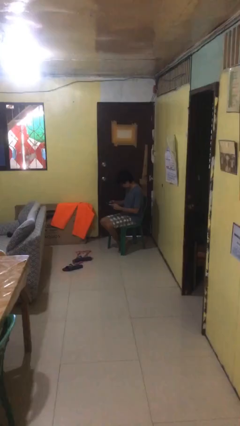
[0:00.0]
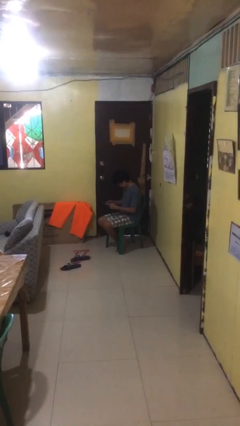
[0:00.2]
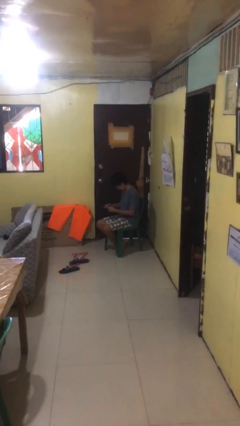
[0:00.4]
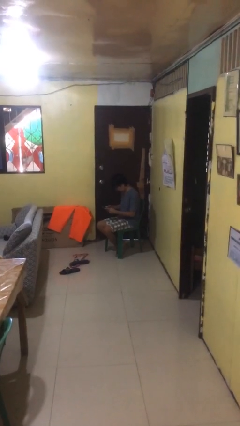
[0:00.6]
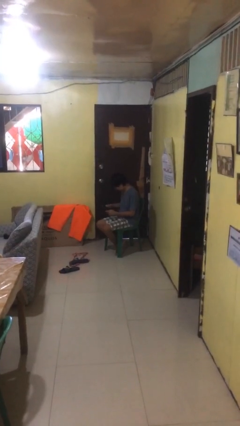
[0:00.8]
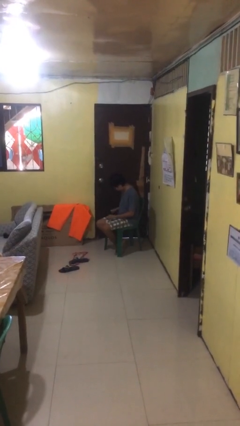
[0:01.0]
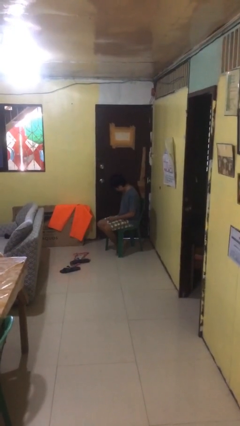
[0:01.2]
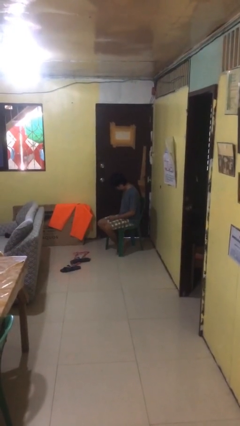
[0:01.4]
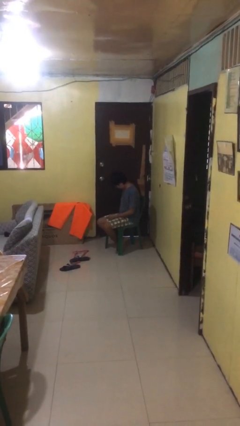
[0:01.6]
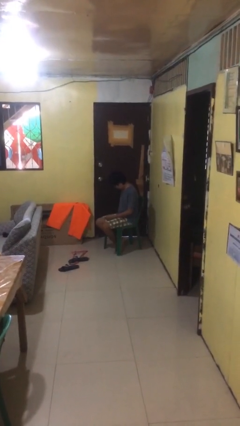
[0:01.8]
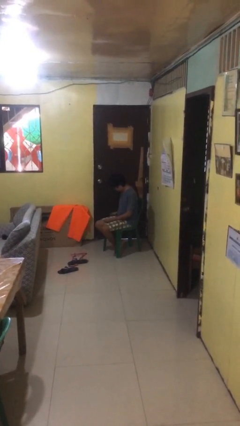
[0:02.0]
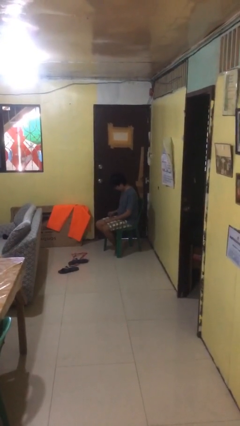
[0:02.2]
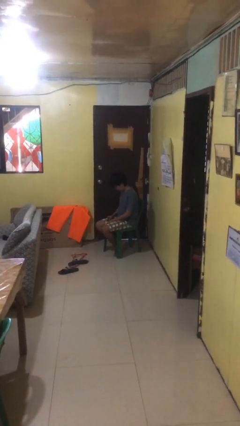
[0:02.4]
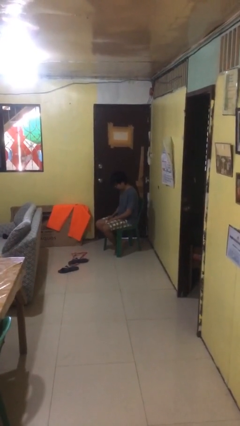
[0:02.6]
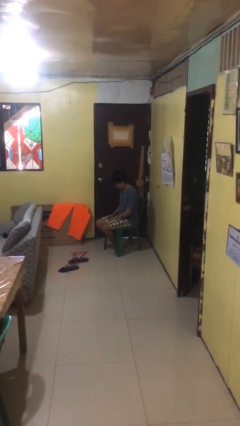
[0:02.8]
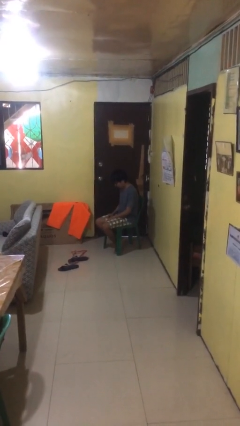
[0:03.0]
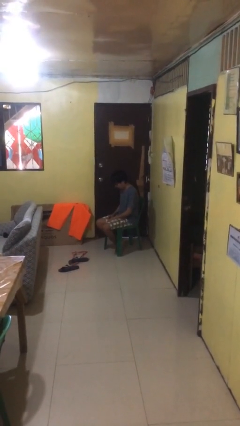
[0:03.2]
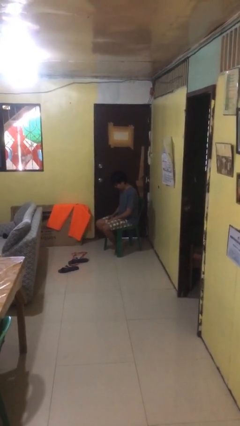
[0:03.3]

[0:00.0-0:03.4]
person puts phone into pocket

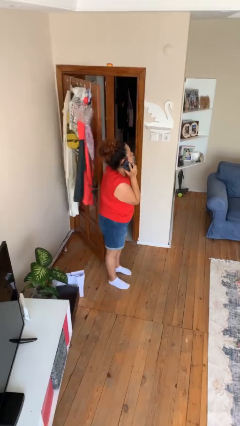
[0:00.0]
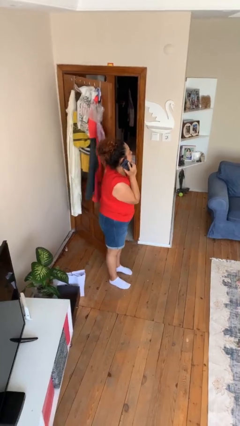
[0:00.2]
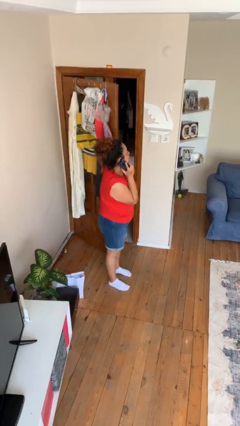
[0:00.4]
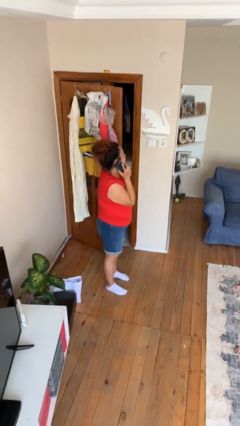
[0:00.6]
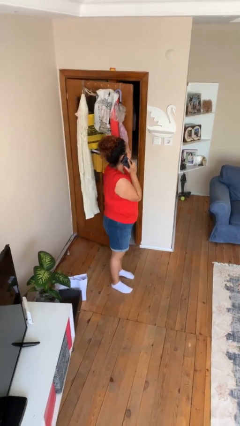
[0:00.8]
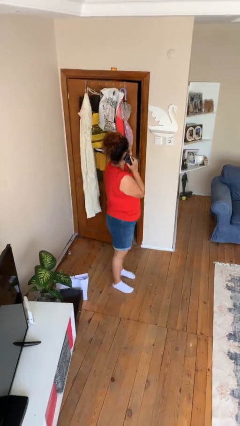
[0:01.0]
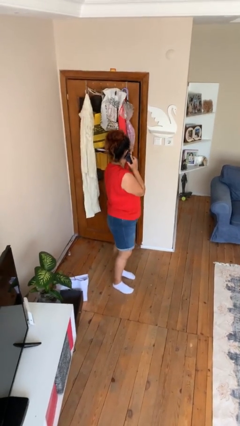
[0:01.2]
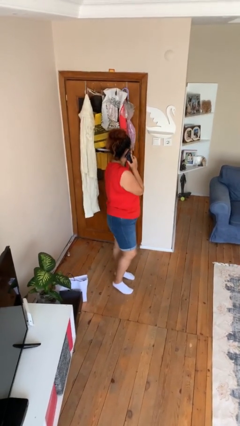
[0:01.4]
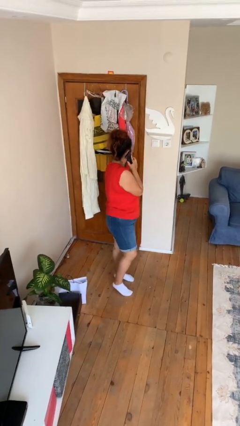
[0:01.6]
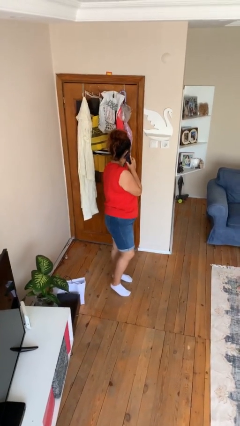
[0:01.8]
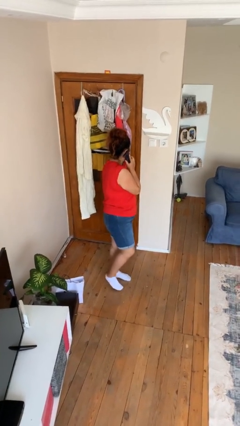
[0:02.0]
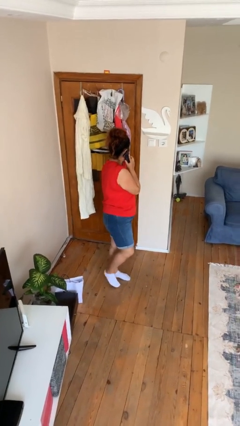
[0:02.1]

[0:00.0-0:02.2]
person closes facility door

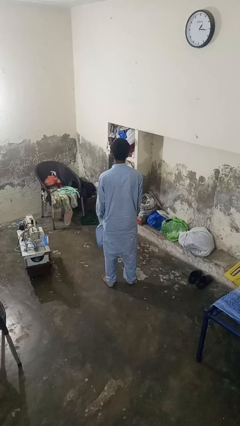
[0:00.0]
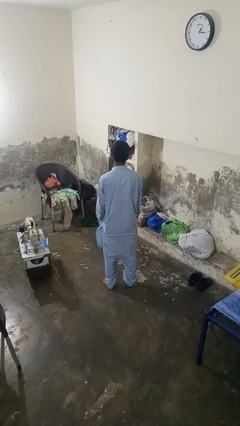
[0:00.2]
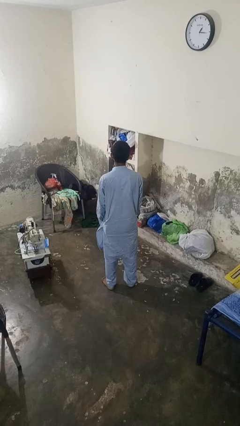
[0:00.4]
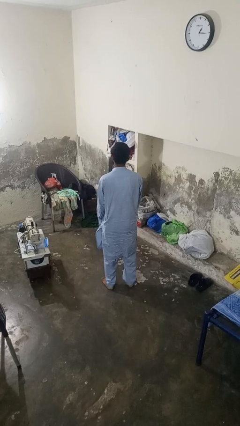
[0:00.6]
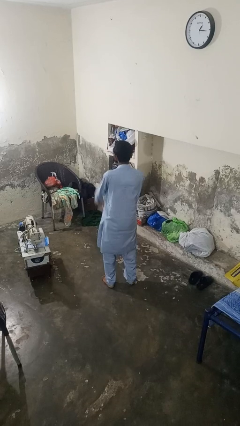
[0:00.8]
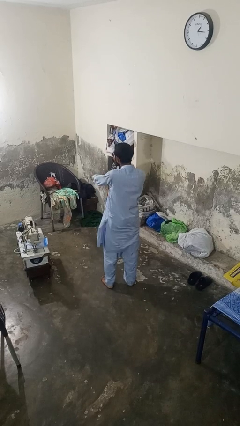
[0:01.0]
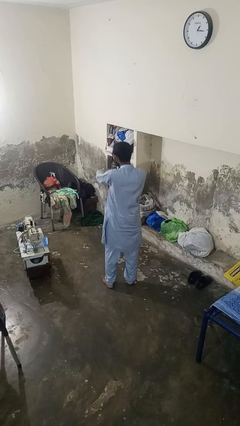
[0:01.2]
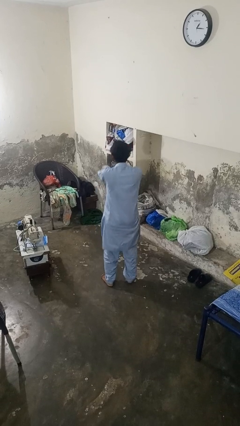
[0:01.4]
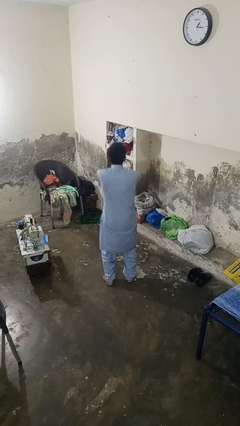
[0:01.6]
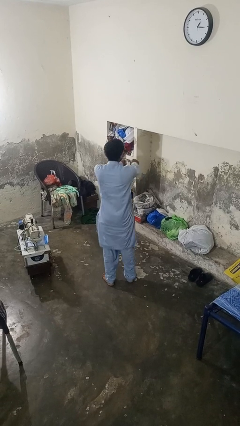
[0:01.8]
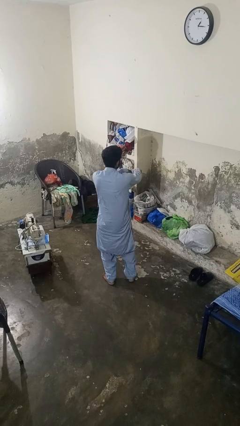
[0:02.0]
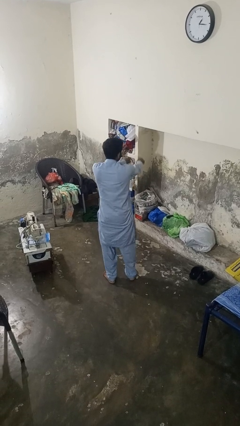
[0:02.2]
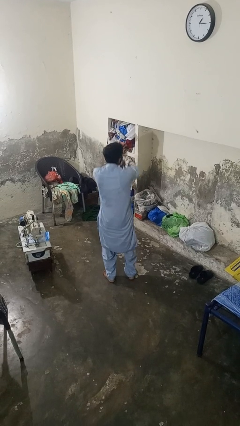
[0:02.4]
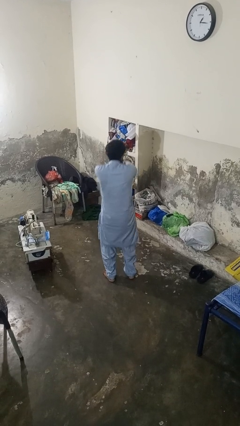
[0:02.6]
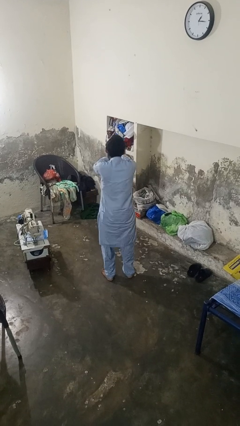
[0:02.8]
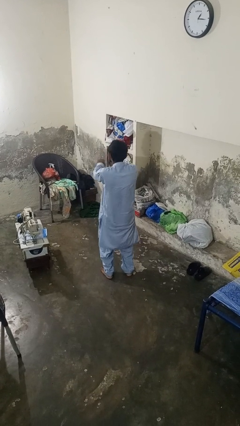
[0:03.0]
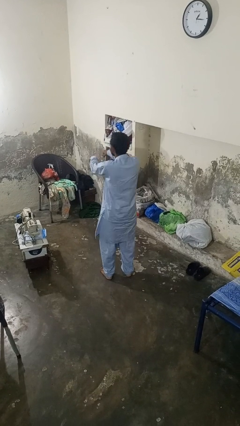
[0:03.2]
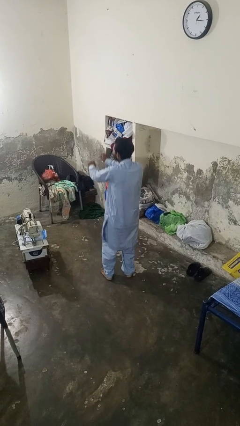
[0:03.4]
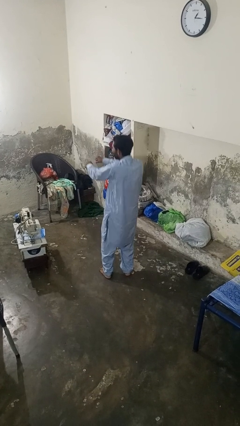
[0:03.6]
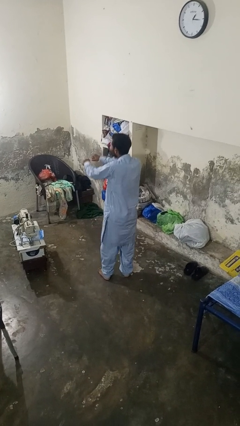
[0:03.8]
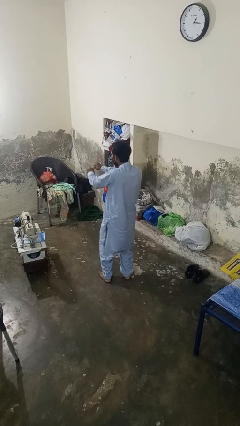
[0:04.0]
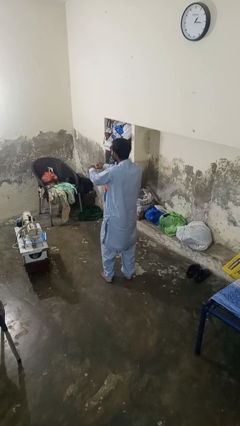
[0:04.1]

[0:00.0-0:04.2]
person dances in place

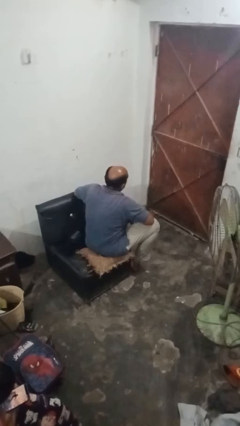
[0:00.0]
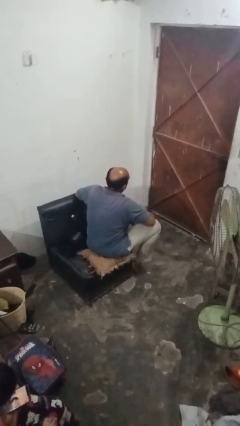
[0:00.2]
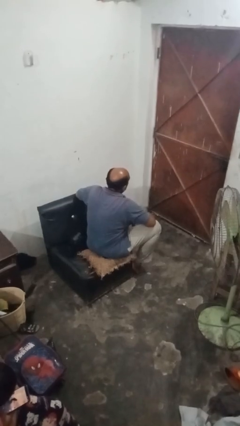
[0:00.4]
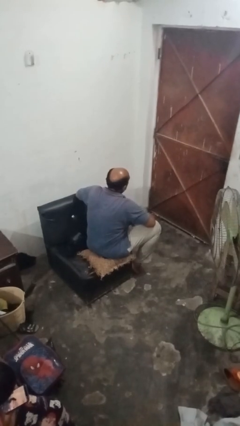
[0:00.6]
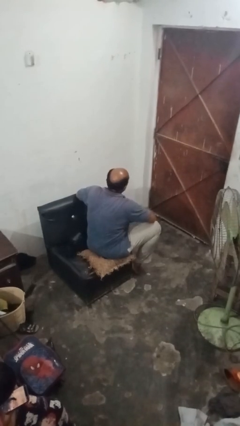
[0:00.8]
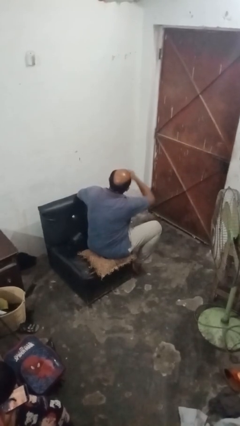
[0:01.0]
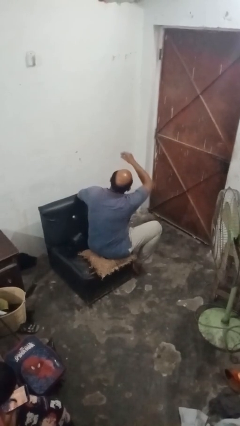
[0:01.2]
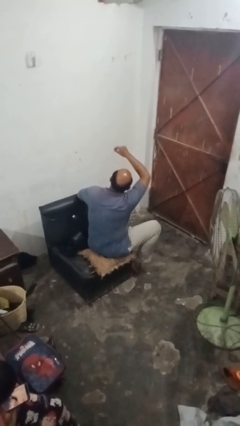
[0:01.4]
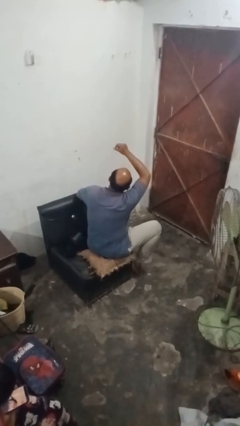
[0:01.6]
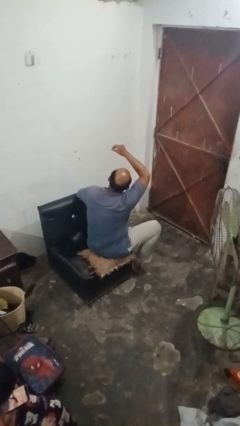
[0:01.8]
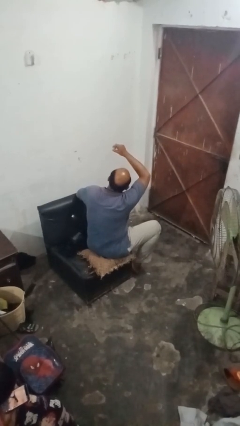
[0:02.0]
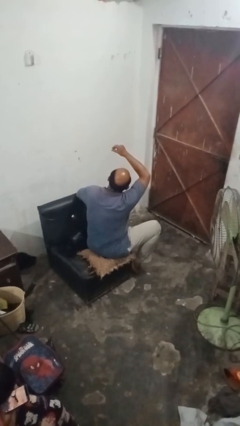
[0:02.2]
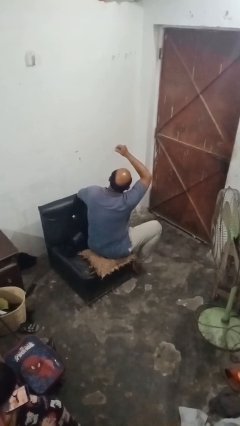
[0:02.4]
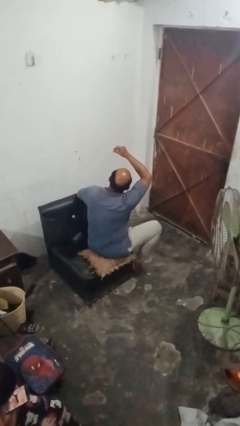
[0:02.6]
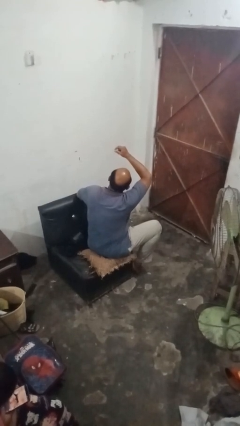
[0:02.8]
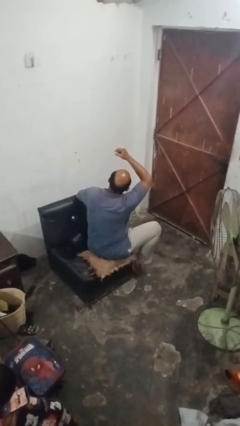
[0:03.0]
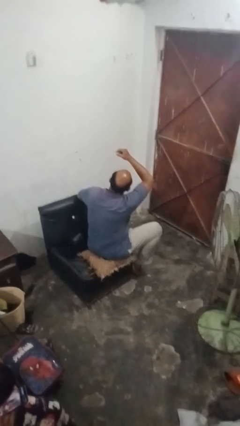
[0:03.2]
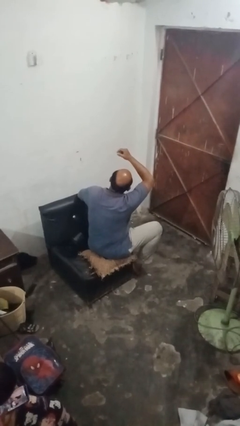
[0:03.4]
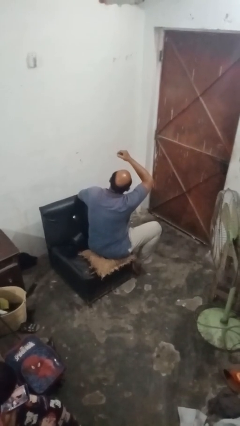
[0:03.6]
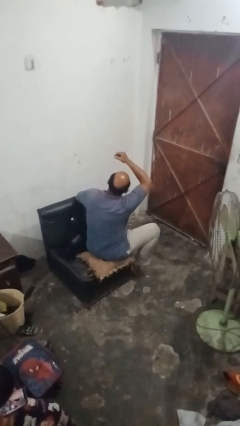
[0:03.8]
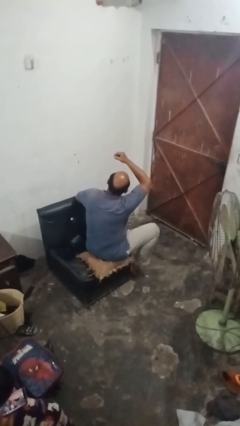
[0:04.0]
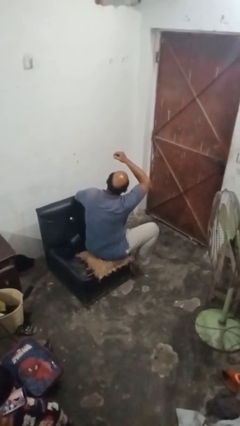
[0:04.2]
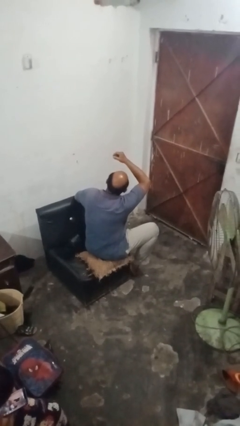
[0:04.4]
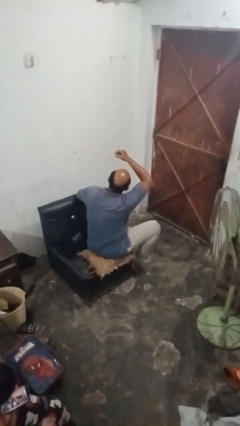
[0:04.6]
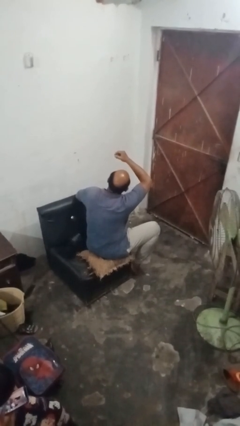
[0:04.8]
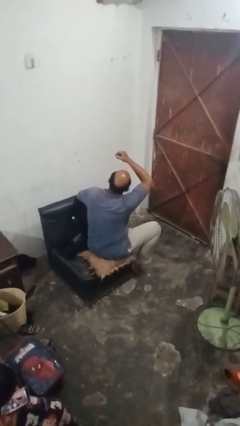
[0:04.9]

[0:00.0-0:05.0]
person snaps fingers

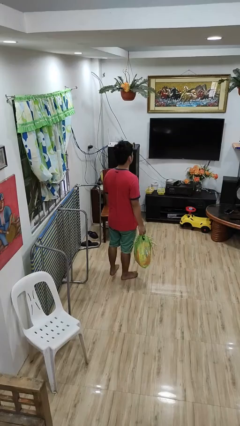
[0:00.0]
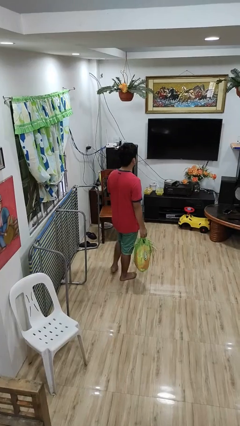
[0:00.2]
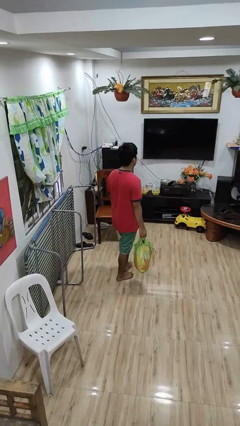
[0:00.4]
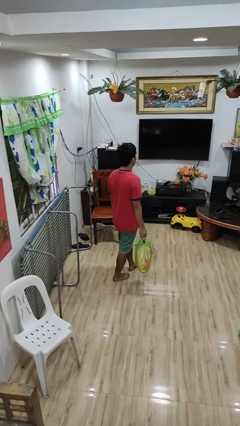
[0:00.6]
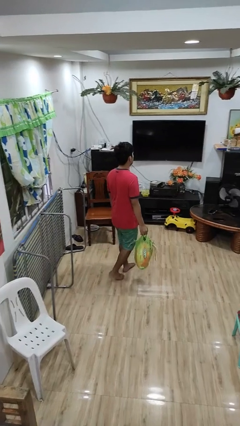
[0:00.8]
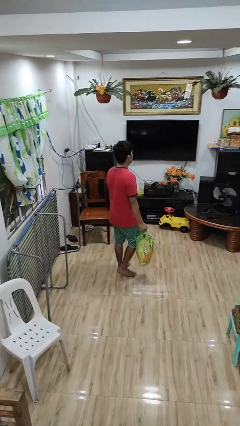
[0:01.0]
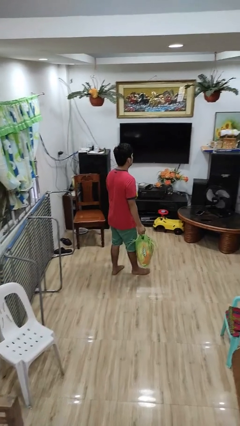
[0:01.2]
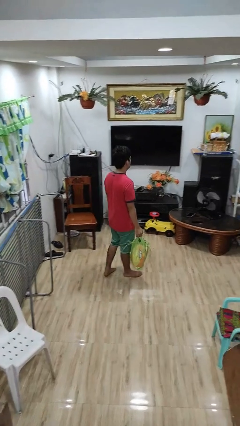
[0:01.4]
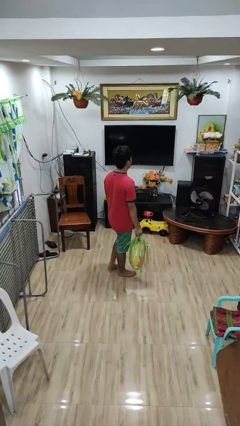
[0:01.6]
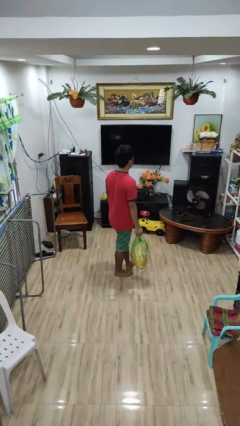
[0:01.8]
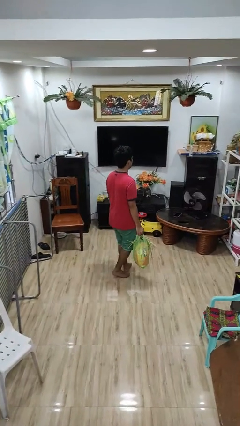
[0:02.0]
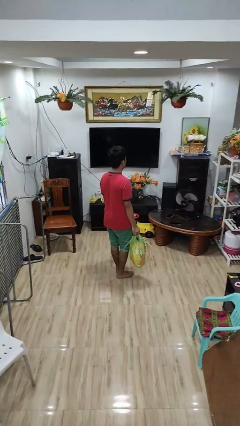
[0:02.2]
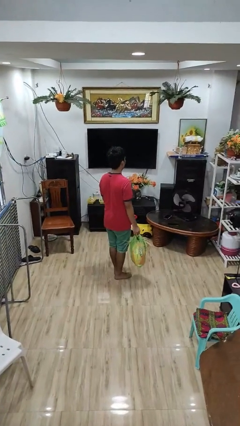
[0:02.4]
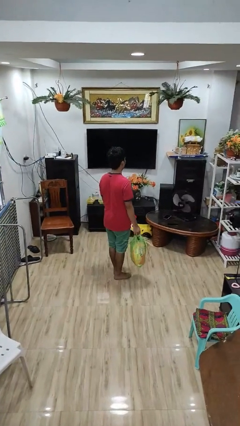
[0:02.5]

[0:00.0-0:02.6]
person carries groceries

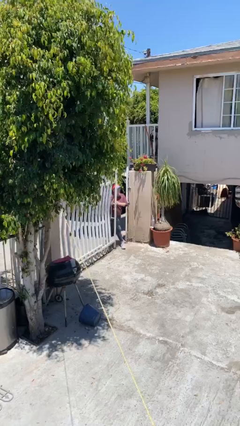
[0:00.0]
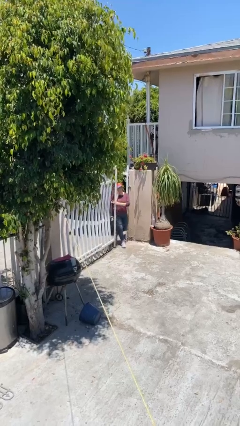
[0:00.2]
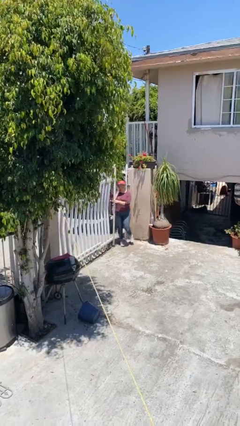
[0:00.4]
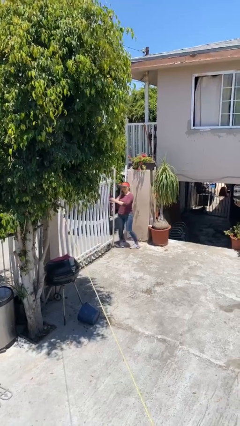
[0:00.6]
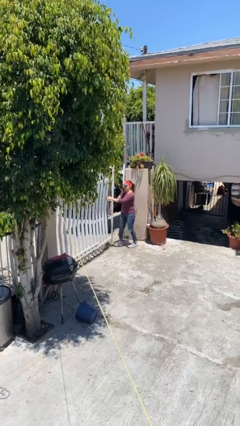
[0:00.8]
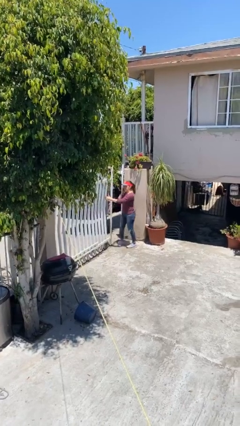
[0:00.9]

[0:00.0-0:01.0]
person enters scene through structure
